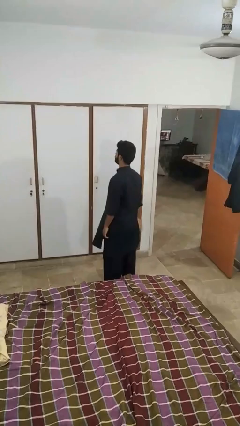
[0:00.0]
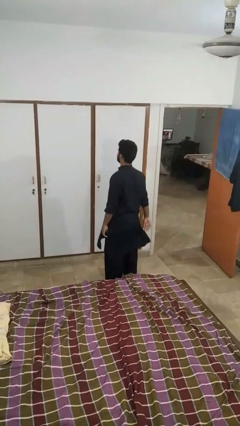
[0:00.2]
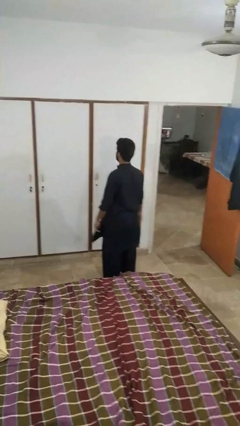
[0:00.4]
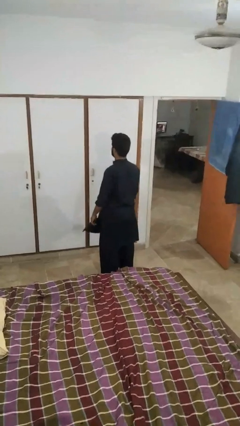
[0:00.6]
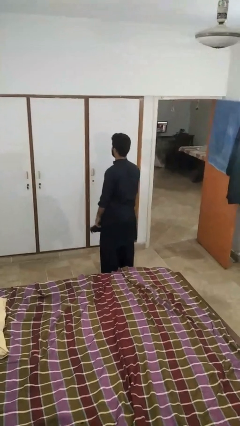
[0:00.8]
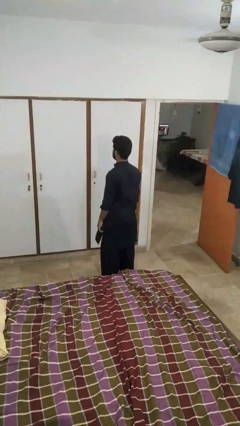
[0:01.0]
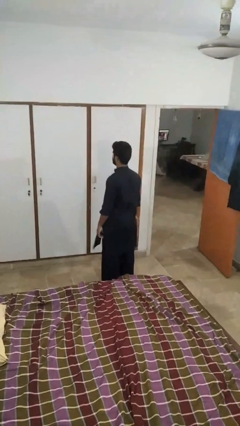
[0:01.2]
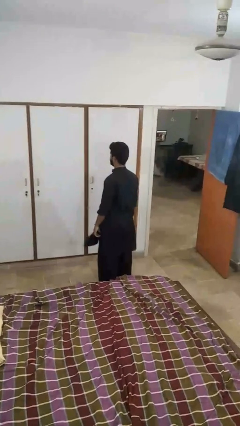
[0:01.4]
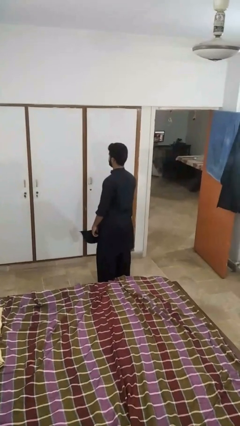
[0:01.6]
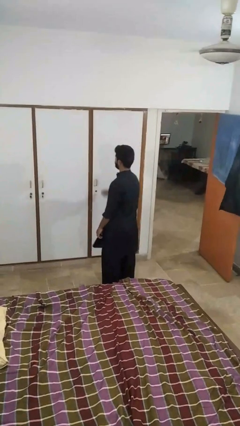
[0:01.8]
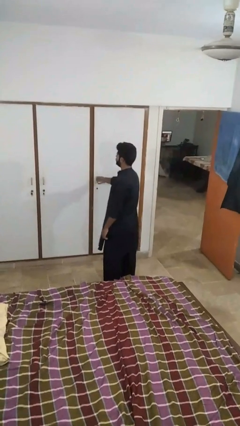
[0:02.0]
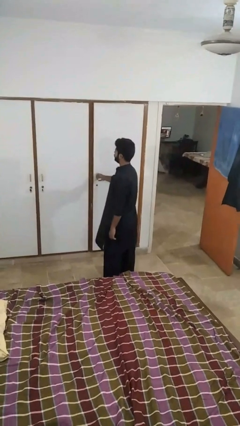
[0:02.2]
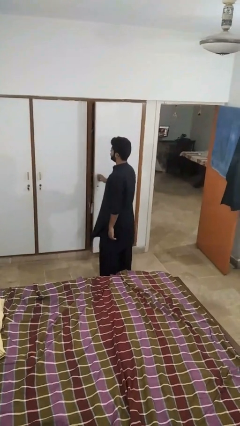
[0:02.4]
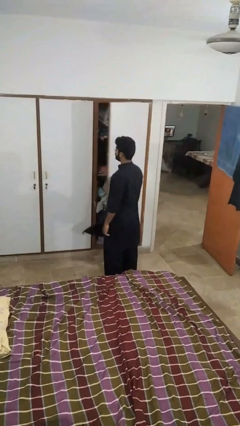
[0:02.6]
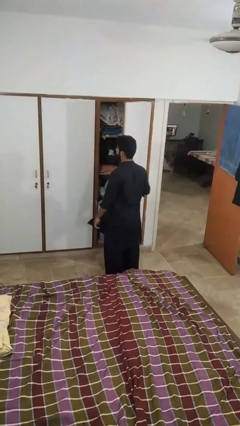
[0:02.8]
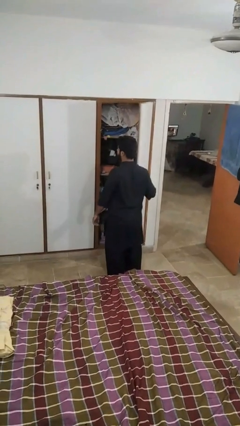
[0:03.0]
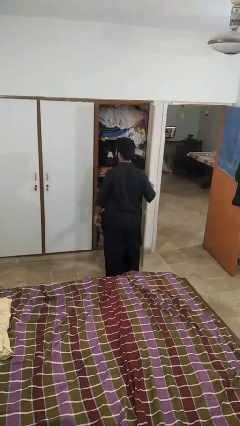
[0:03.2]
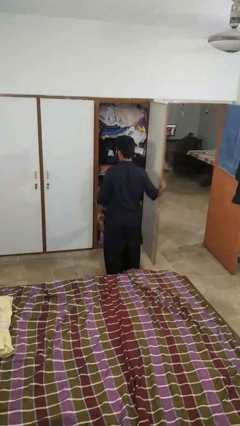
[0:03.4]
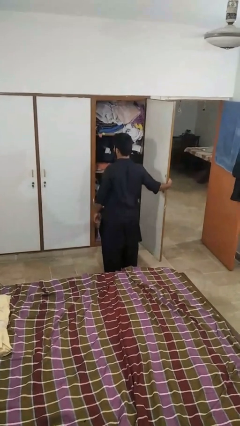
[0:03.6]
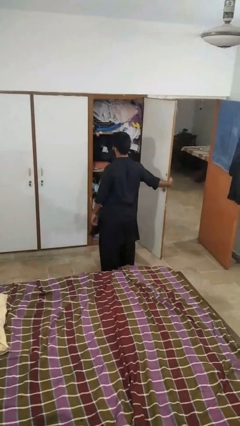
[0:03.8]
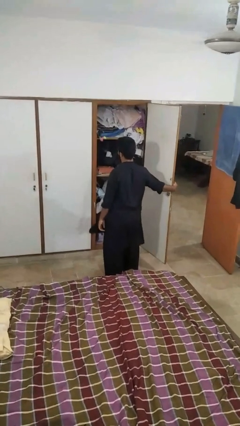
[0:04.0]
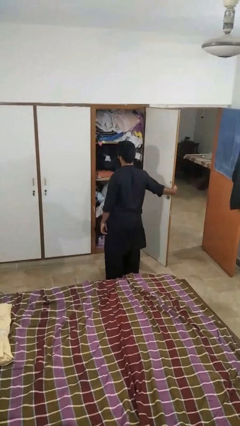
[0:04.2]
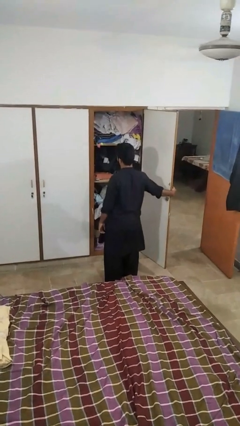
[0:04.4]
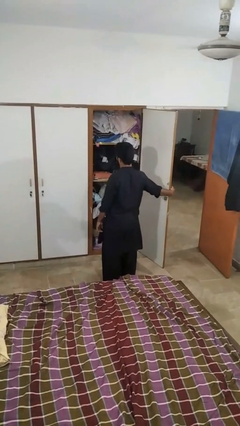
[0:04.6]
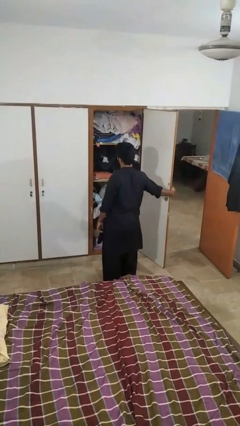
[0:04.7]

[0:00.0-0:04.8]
person opens closet door

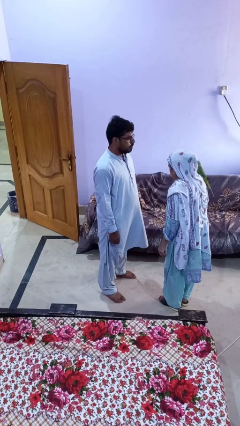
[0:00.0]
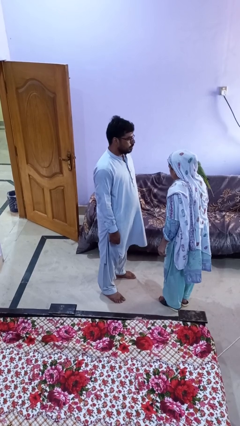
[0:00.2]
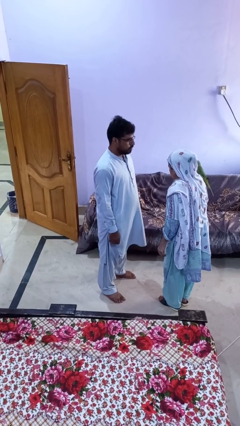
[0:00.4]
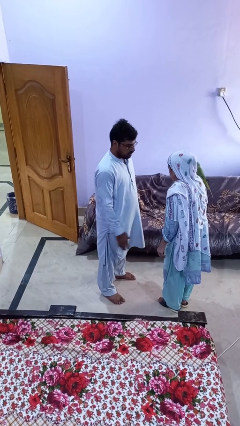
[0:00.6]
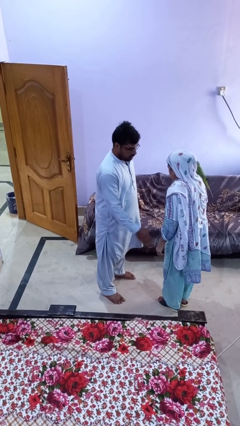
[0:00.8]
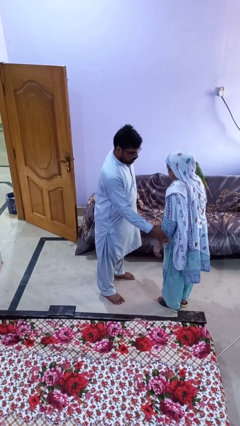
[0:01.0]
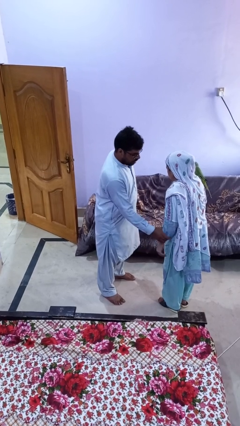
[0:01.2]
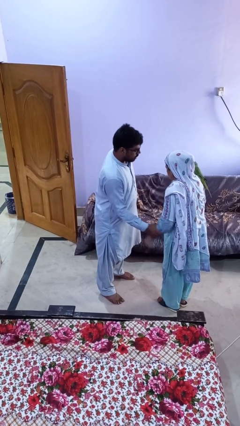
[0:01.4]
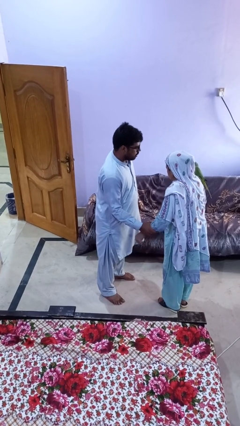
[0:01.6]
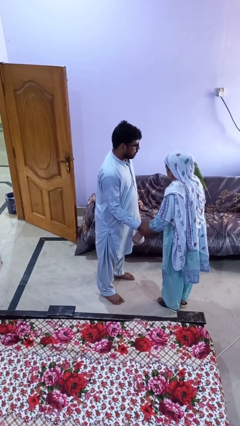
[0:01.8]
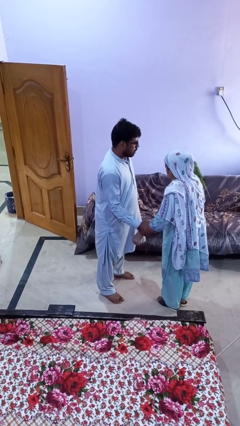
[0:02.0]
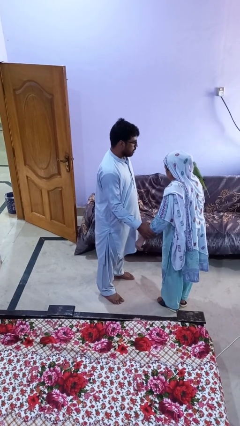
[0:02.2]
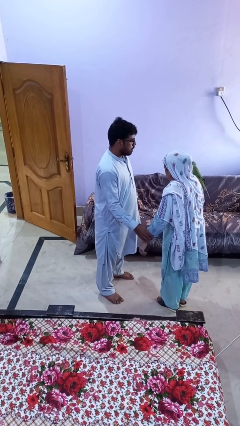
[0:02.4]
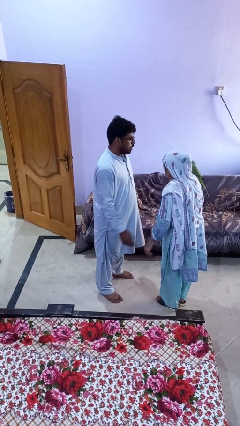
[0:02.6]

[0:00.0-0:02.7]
person grabs person by forearm

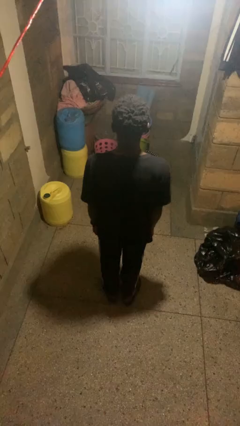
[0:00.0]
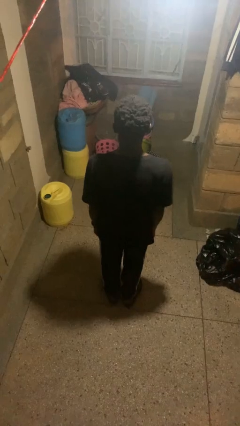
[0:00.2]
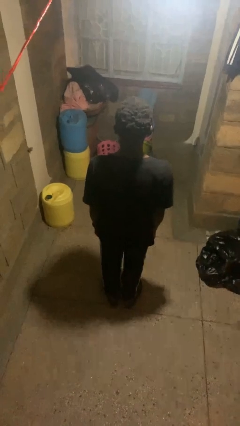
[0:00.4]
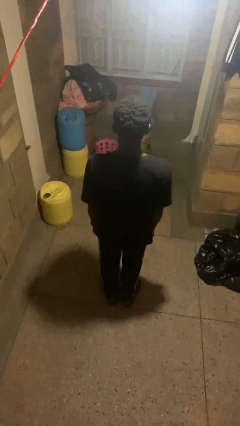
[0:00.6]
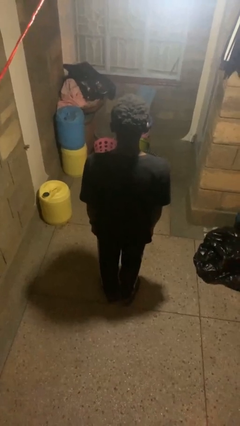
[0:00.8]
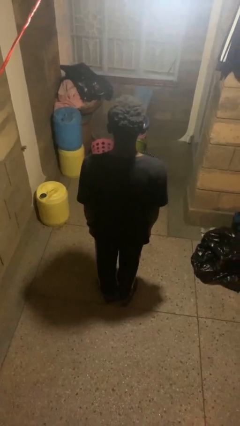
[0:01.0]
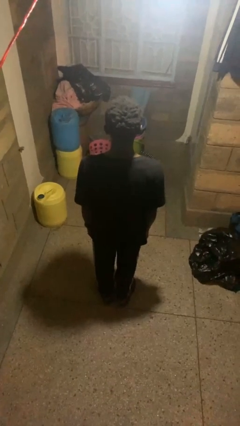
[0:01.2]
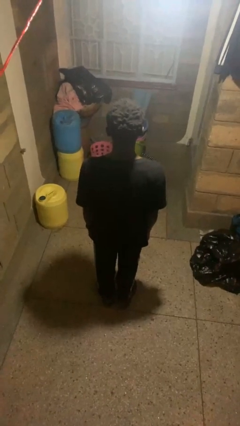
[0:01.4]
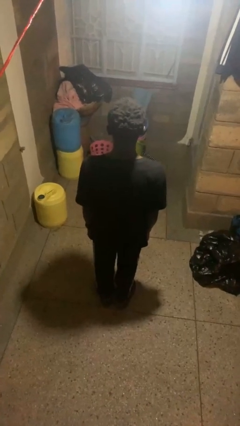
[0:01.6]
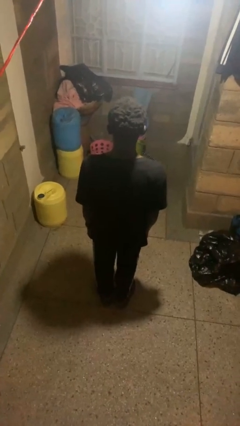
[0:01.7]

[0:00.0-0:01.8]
person touches earlobe

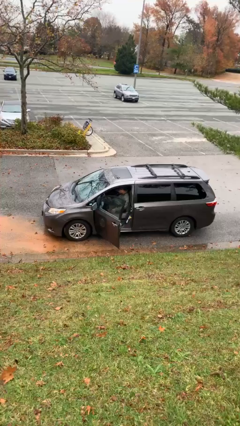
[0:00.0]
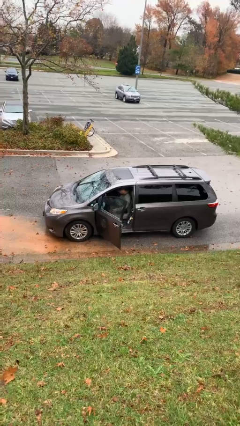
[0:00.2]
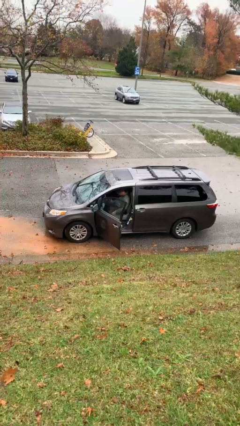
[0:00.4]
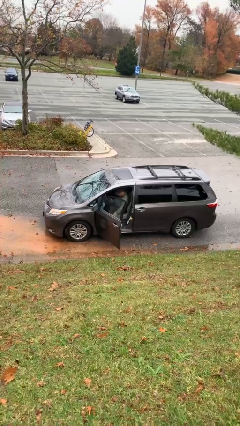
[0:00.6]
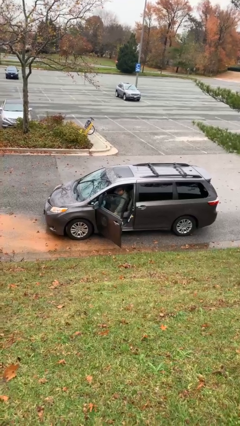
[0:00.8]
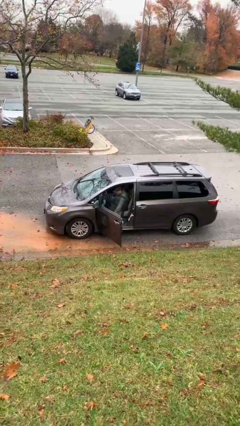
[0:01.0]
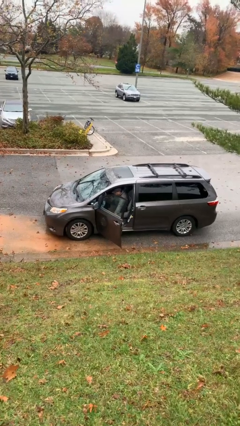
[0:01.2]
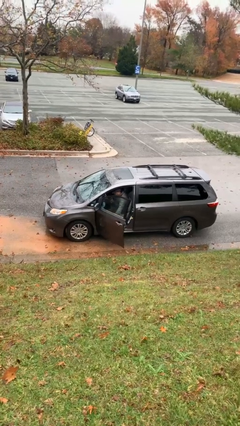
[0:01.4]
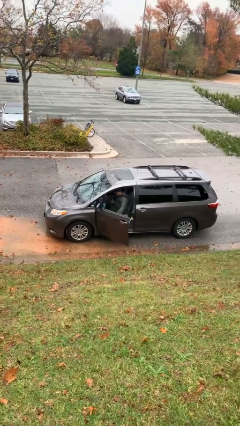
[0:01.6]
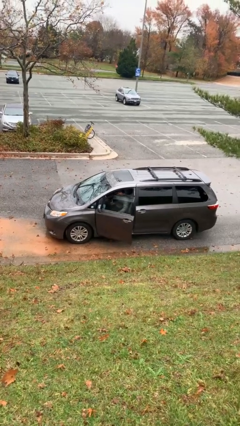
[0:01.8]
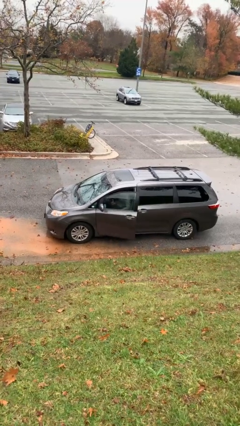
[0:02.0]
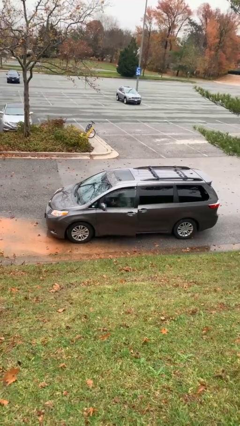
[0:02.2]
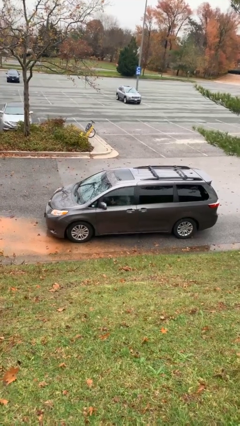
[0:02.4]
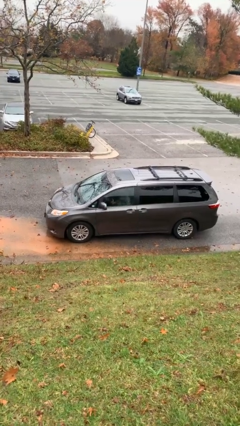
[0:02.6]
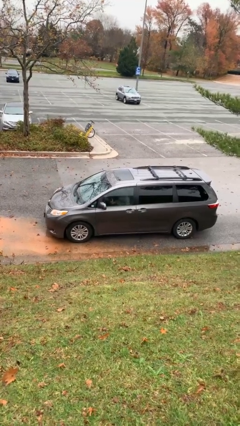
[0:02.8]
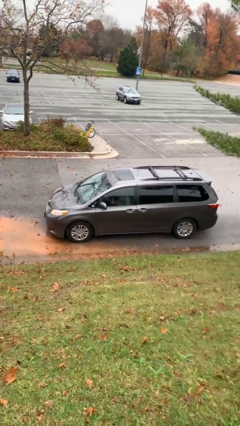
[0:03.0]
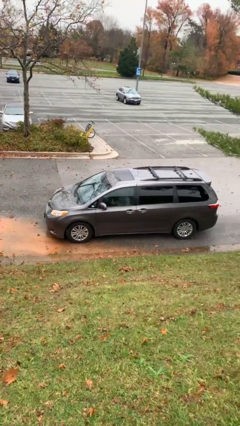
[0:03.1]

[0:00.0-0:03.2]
person closes car door

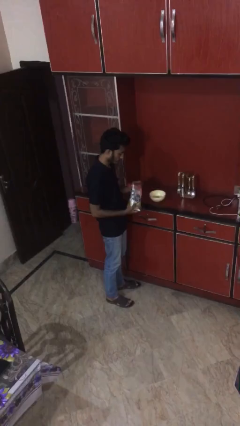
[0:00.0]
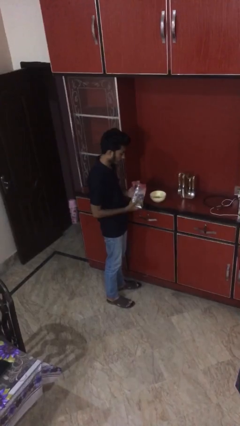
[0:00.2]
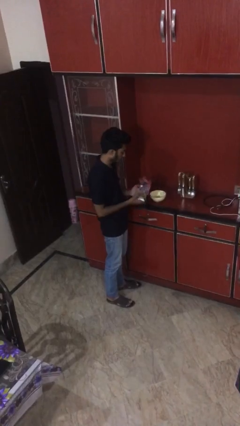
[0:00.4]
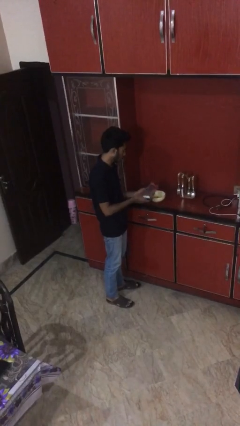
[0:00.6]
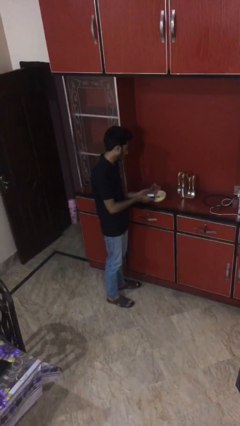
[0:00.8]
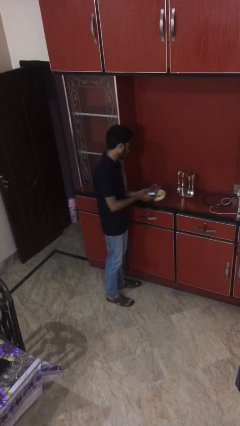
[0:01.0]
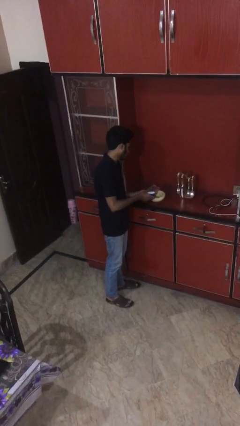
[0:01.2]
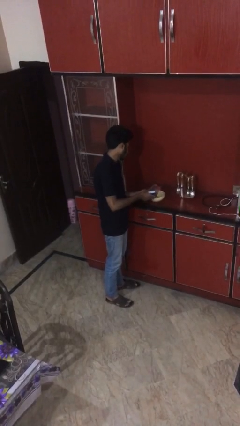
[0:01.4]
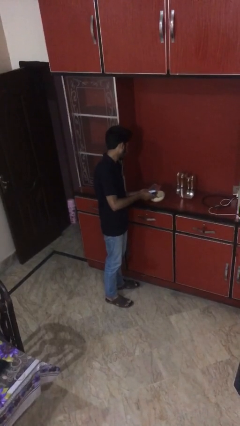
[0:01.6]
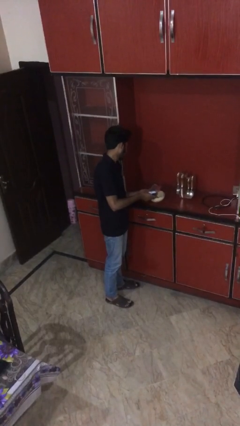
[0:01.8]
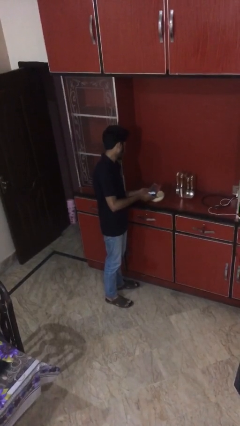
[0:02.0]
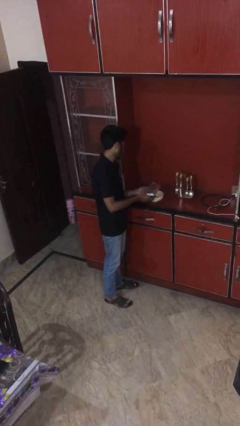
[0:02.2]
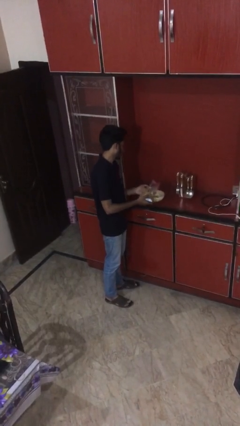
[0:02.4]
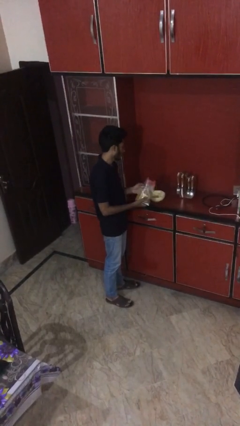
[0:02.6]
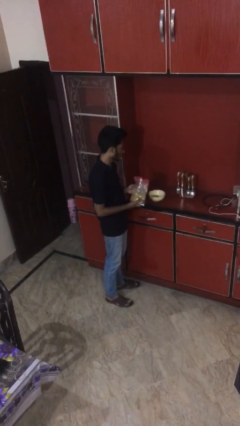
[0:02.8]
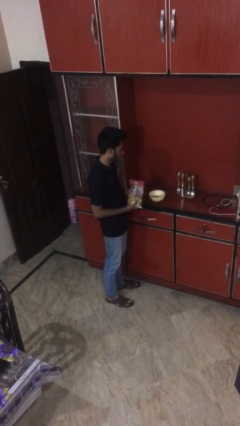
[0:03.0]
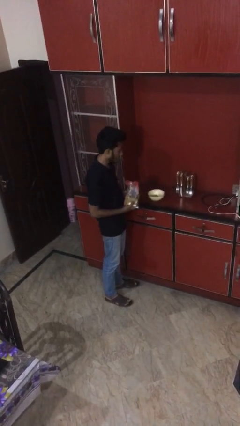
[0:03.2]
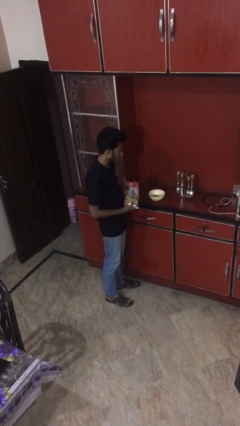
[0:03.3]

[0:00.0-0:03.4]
person pours into bowl

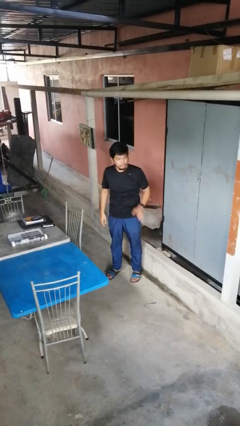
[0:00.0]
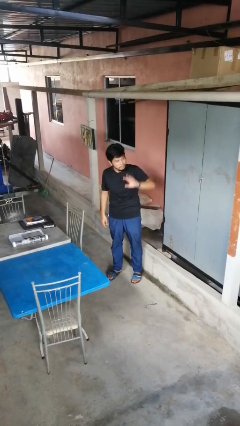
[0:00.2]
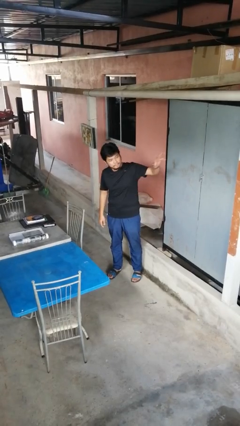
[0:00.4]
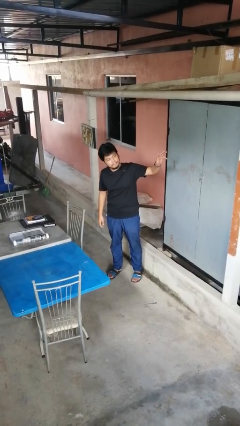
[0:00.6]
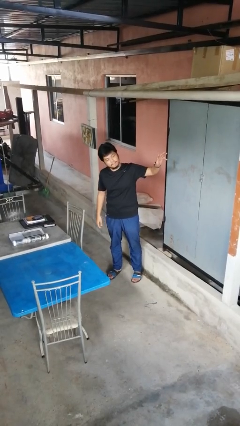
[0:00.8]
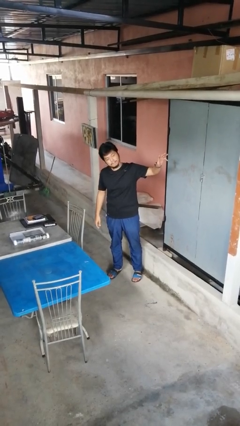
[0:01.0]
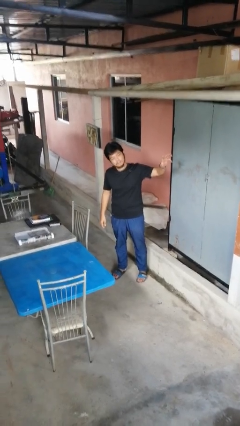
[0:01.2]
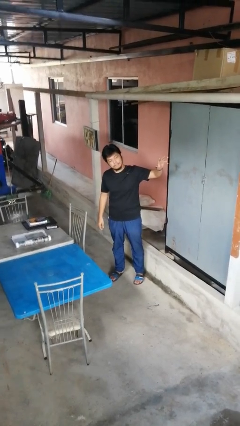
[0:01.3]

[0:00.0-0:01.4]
person gestures swipe left
